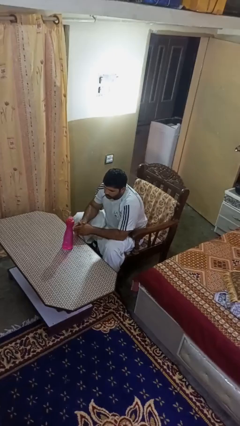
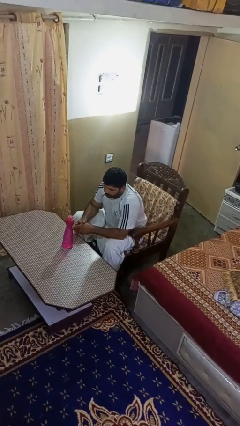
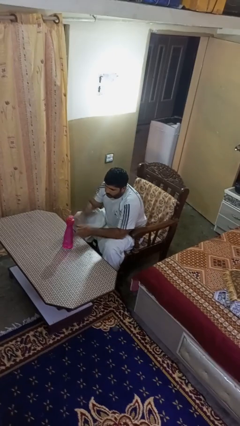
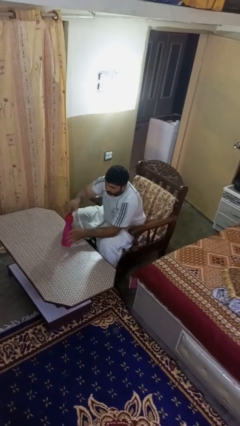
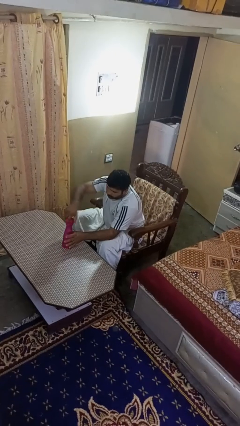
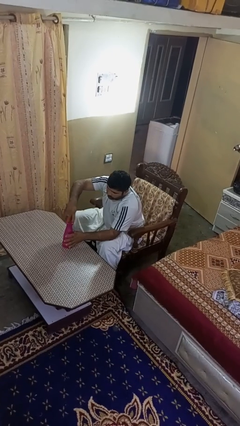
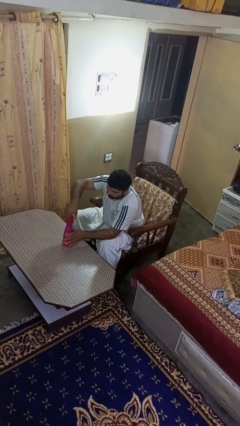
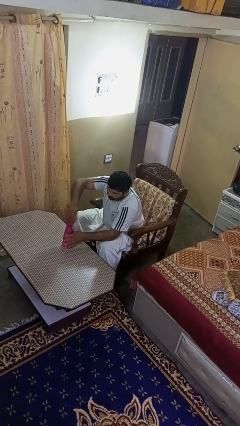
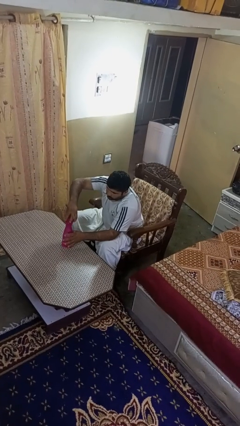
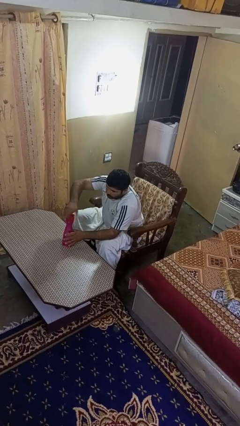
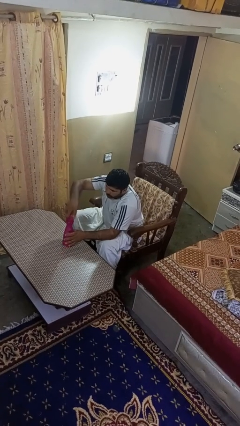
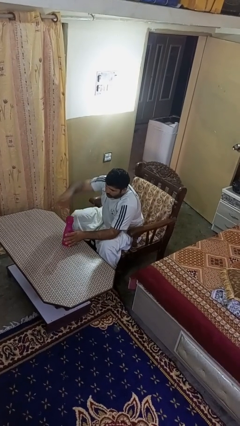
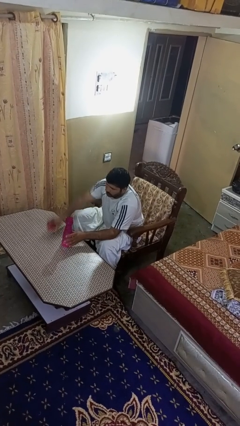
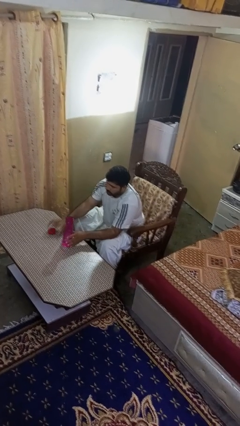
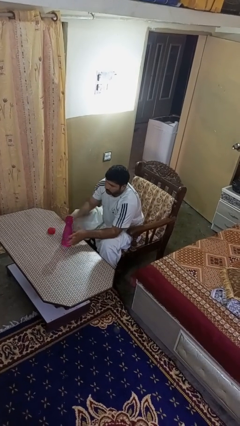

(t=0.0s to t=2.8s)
person unscrews lid from bottle

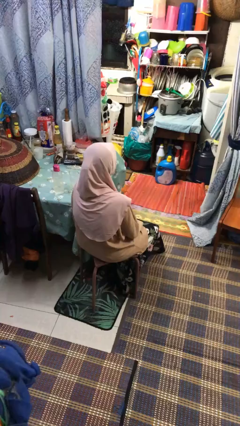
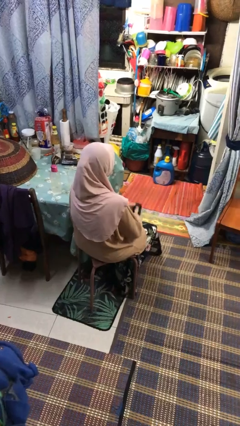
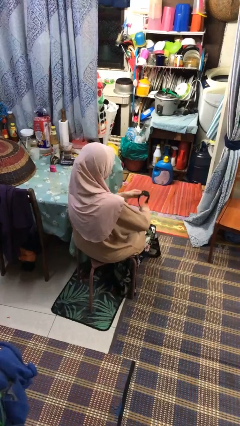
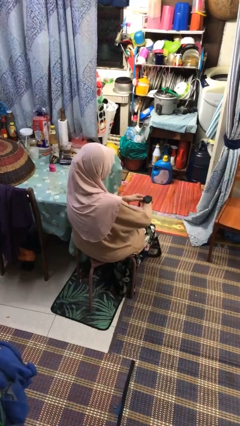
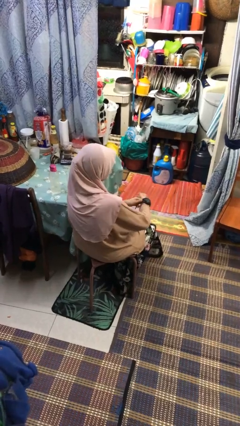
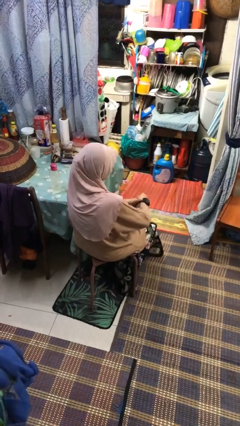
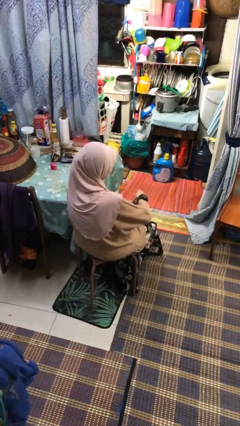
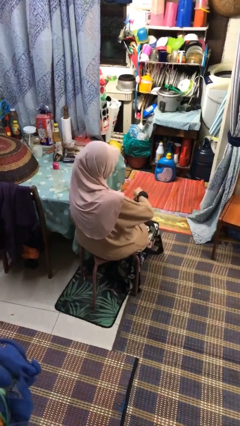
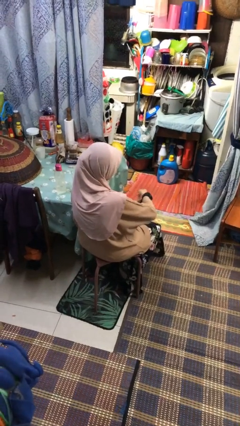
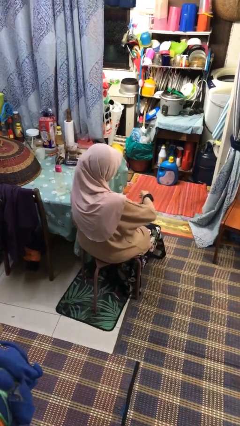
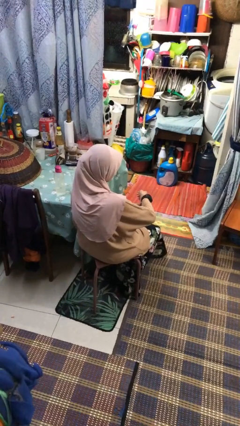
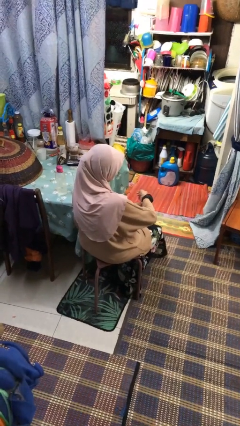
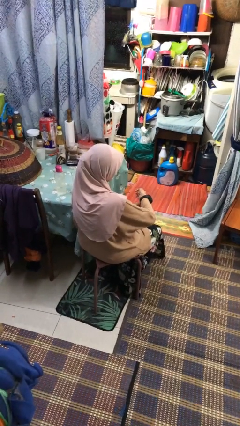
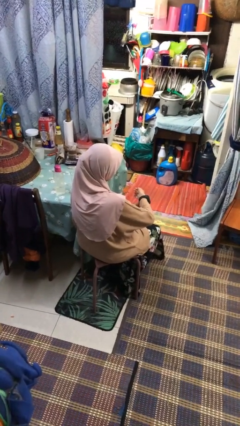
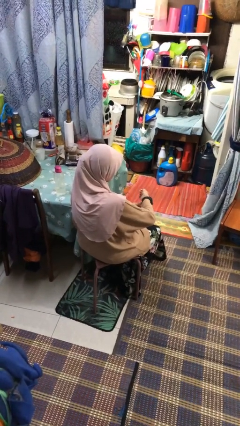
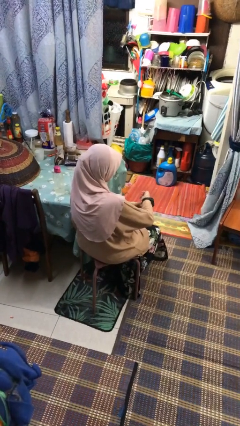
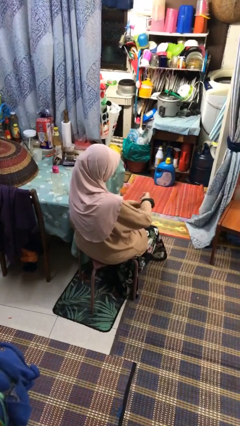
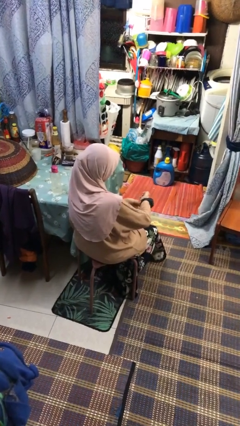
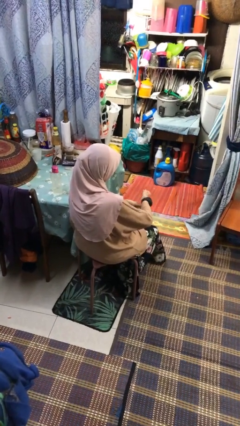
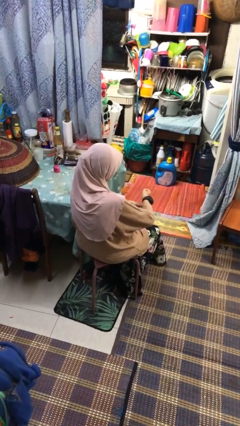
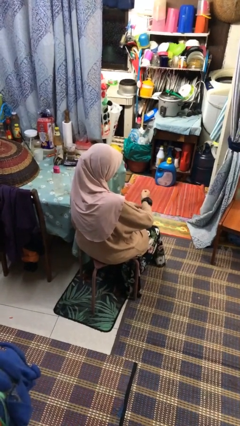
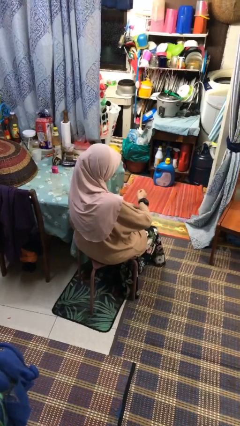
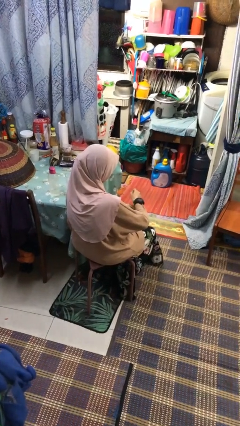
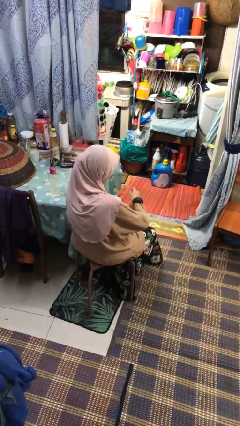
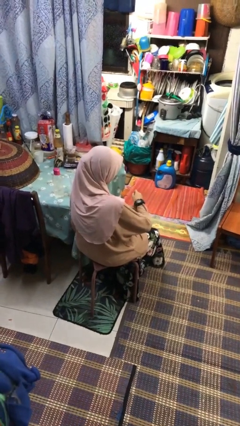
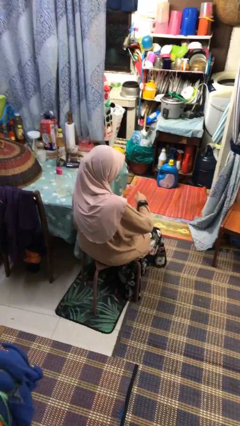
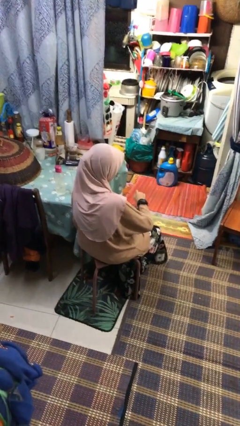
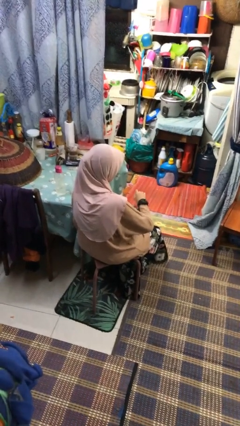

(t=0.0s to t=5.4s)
person puts on wristwatch

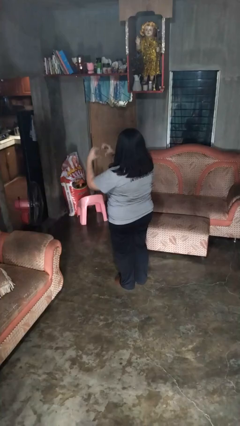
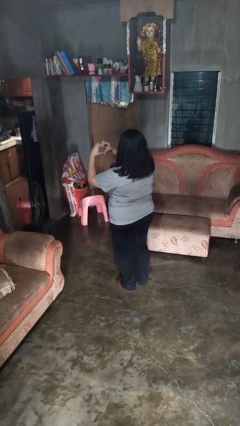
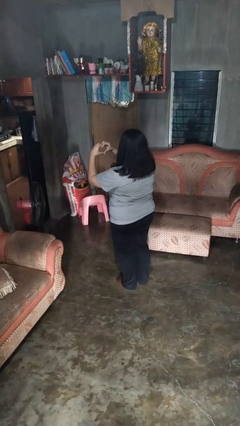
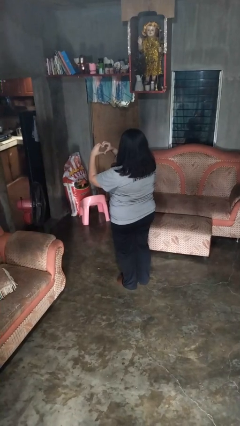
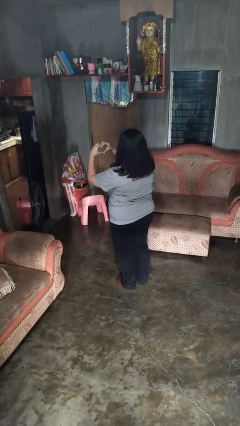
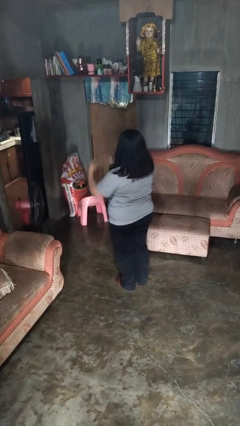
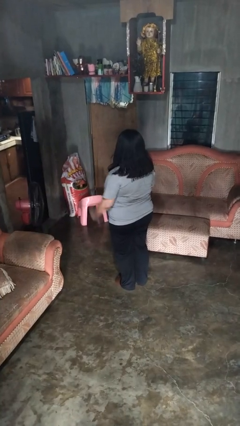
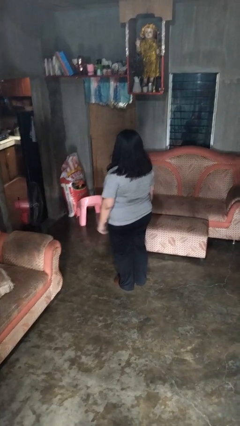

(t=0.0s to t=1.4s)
person gestures heart

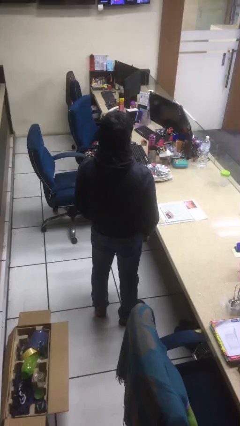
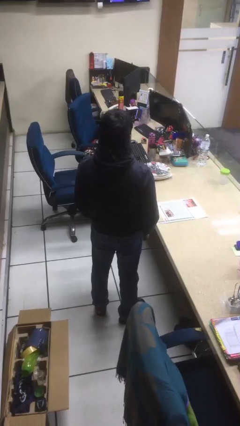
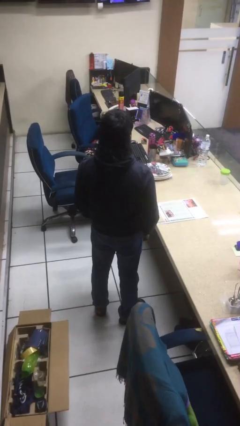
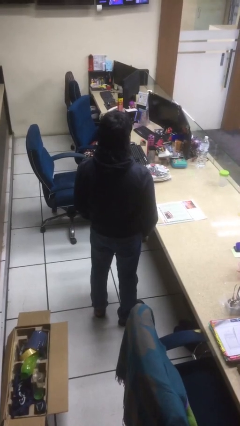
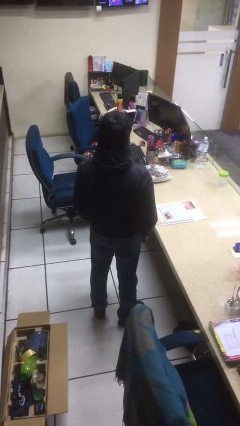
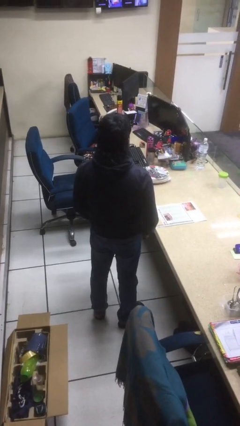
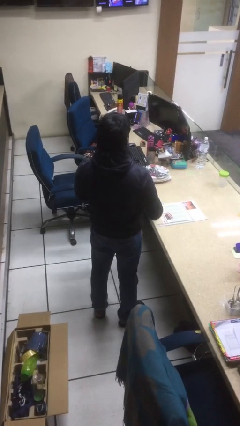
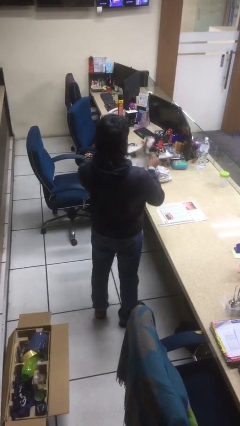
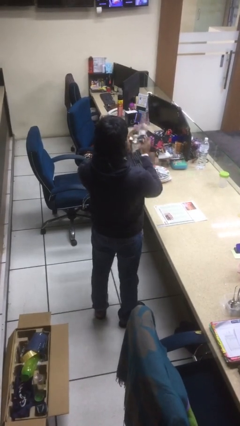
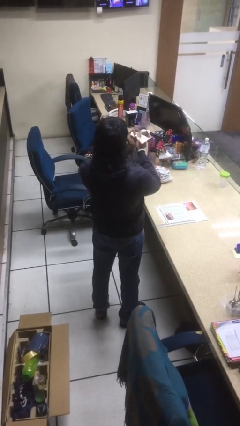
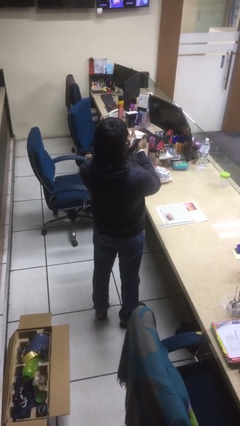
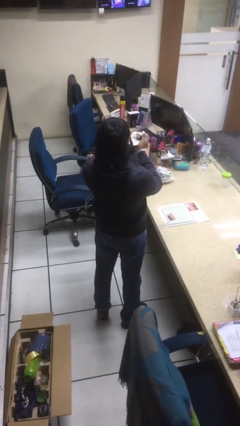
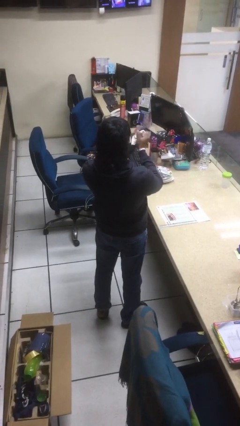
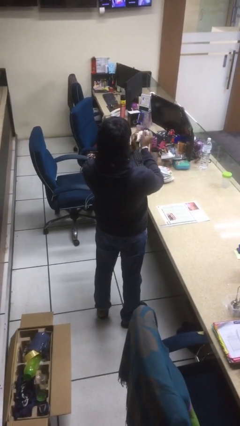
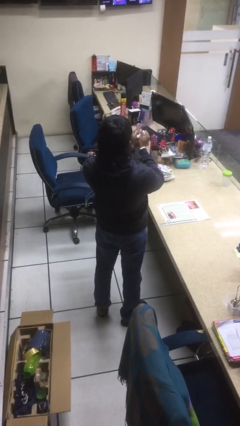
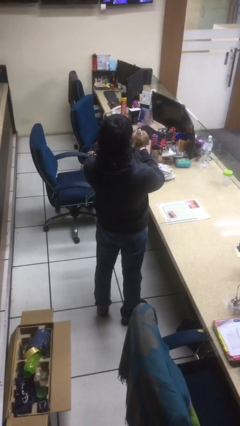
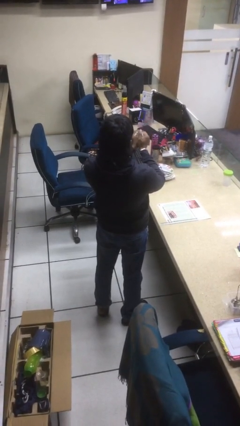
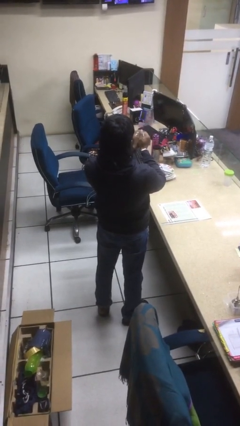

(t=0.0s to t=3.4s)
person crumples paper

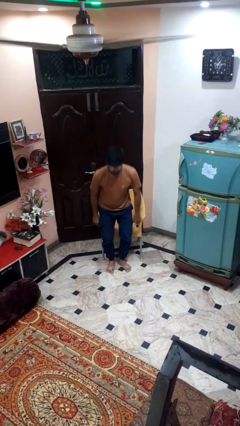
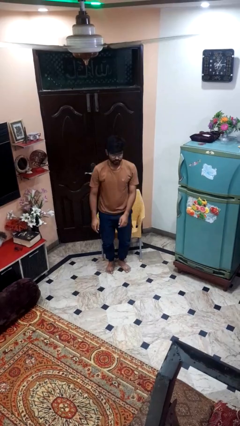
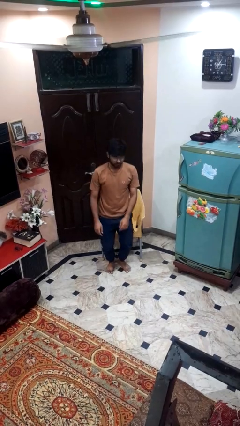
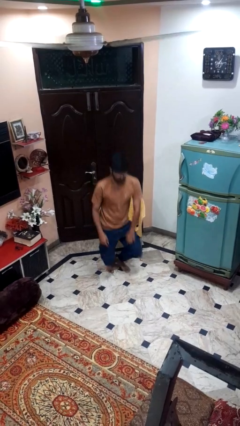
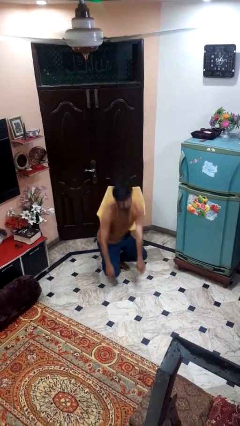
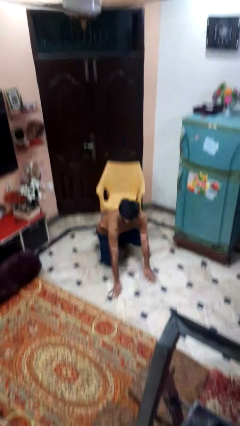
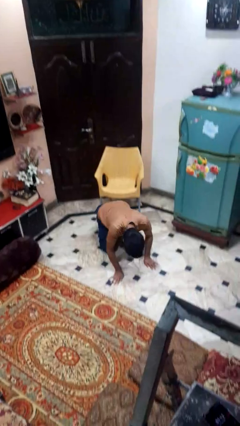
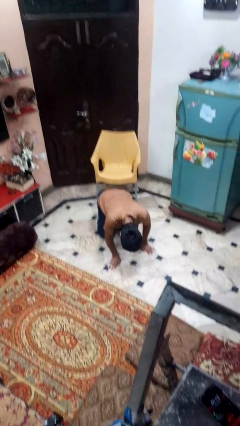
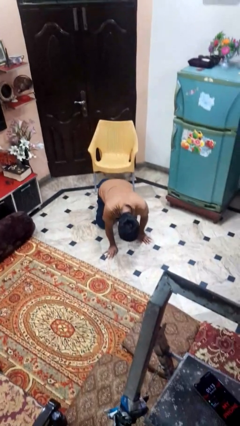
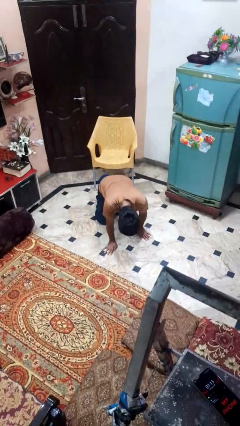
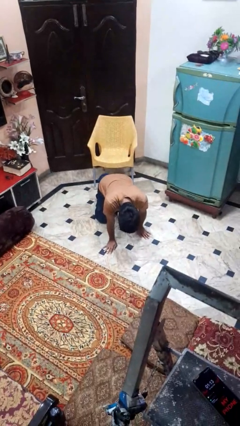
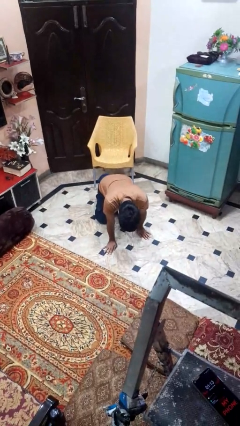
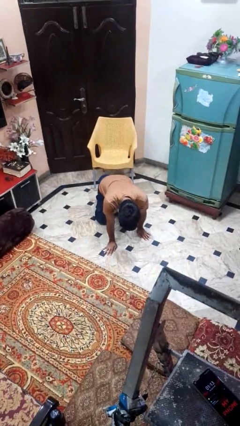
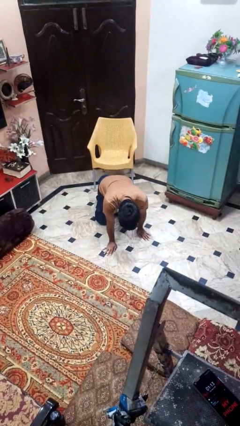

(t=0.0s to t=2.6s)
person falls from chair

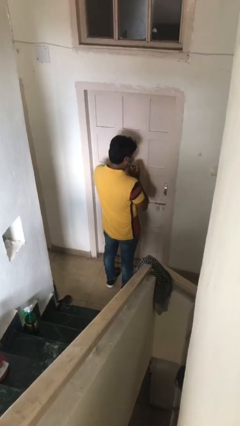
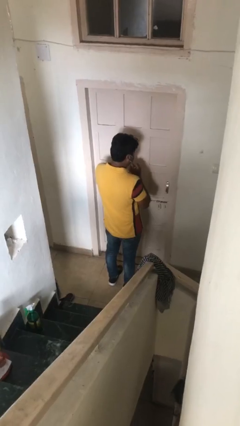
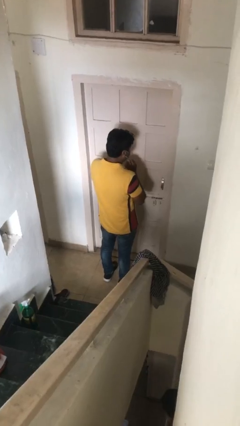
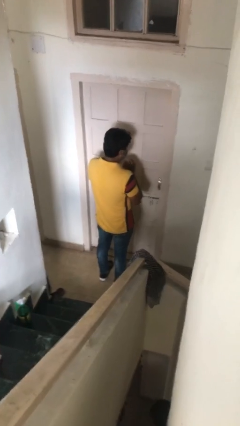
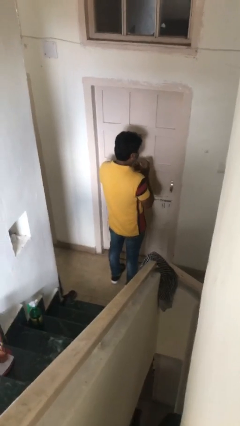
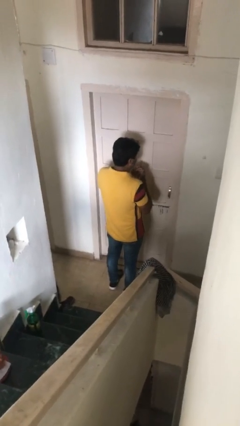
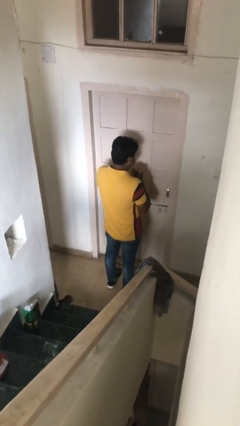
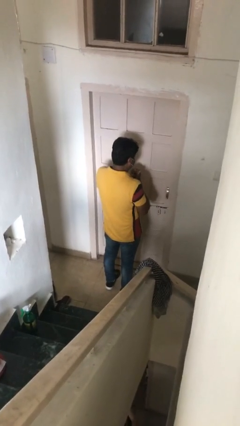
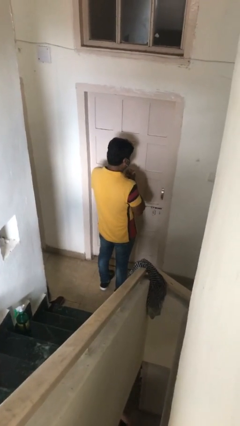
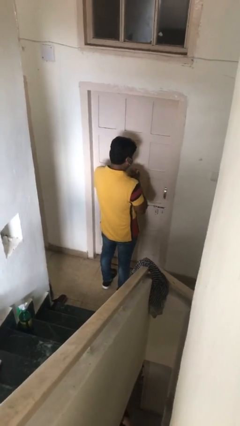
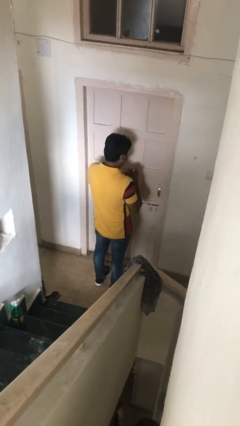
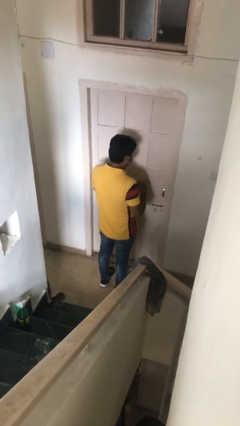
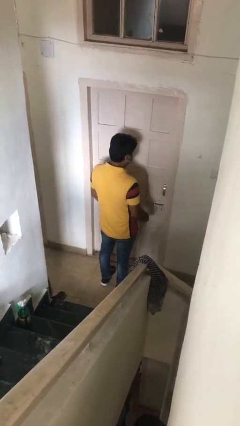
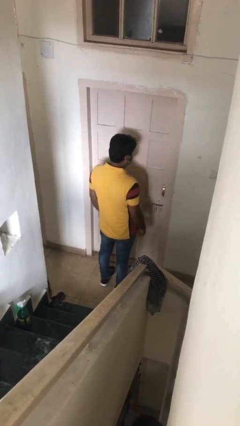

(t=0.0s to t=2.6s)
person cracks knuckles
